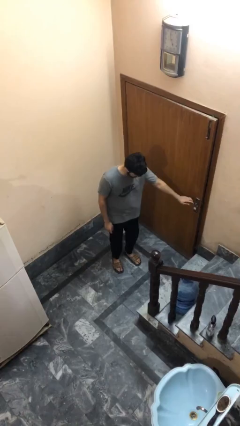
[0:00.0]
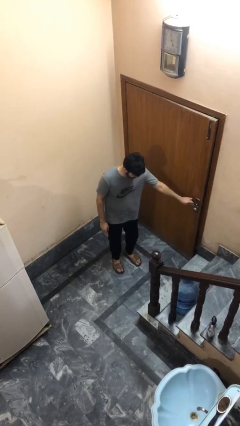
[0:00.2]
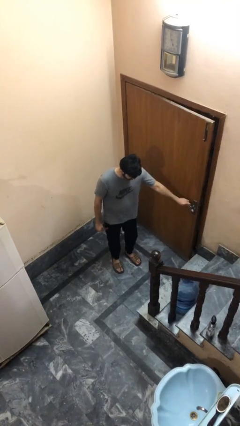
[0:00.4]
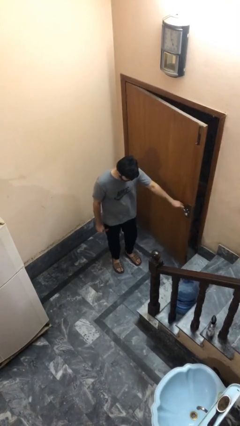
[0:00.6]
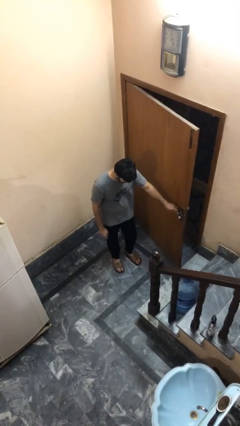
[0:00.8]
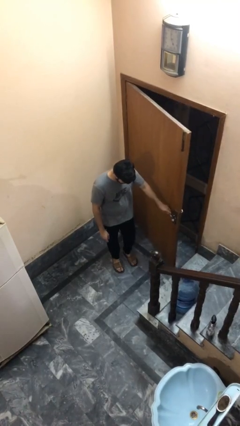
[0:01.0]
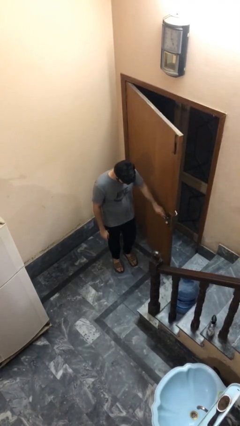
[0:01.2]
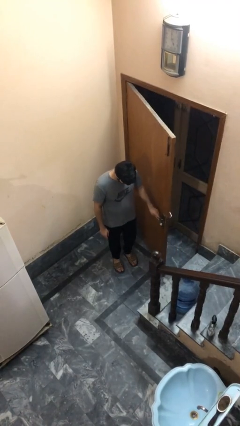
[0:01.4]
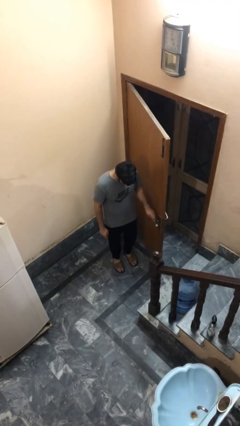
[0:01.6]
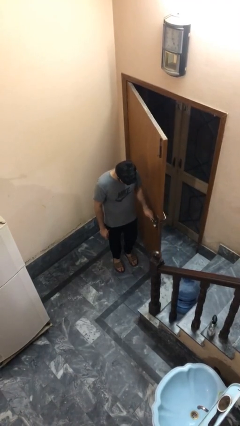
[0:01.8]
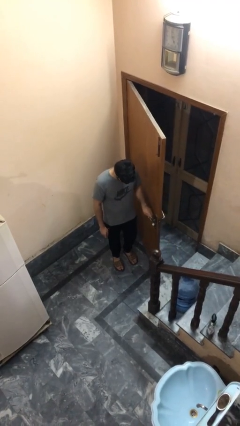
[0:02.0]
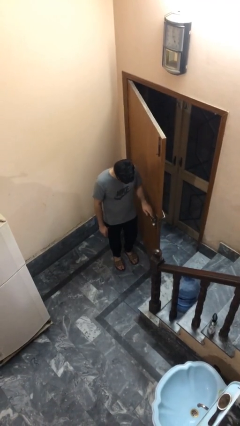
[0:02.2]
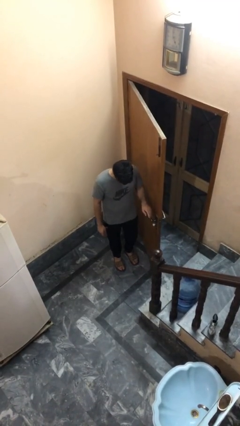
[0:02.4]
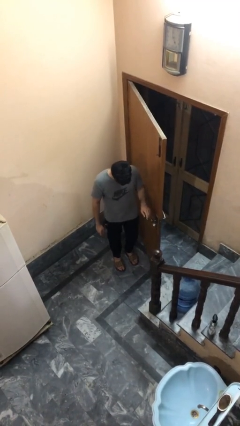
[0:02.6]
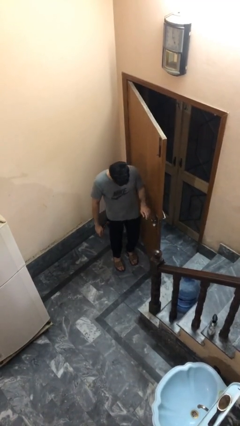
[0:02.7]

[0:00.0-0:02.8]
person opens facility door

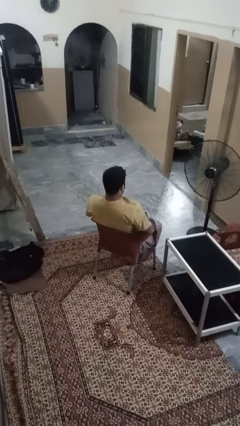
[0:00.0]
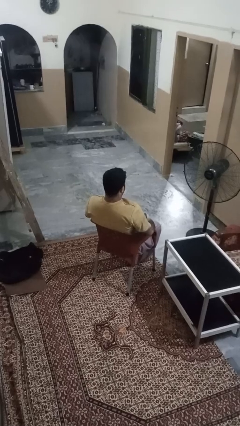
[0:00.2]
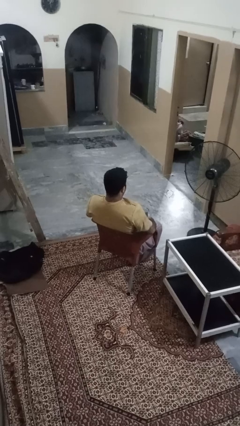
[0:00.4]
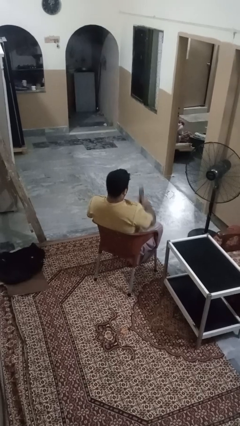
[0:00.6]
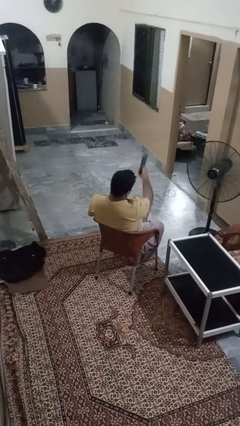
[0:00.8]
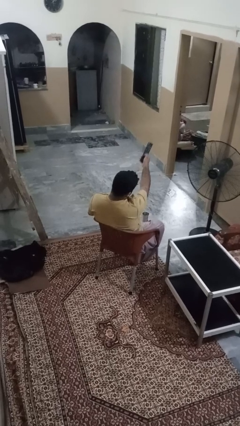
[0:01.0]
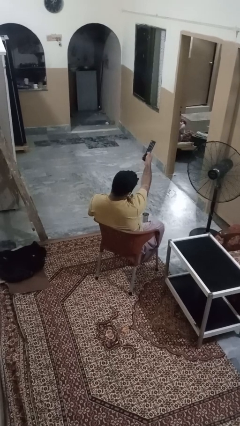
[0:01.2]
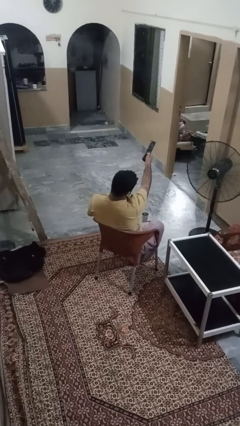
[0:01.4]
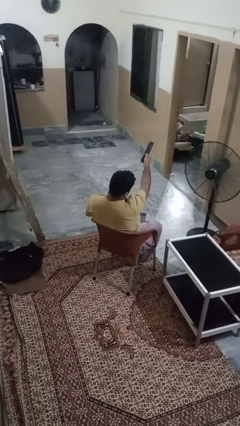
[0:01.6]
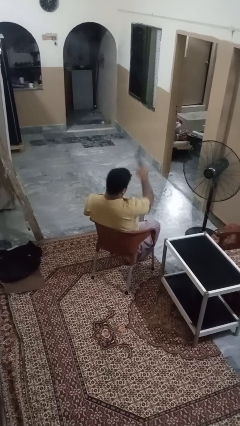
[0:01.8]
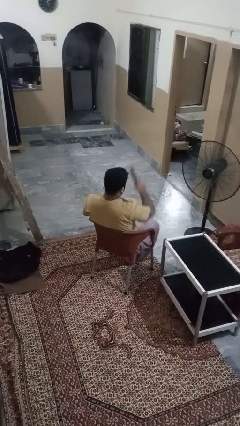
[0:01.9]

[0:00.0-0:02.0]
person uses television remote

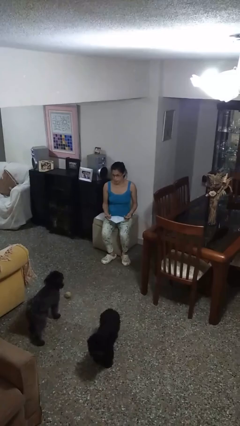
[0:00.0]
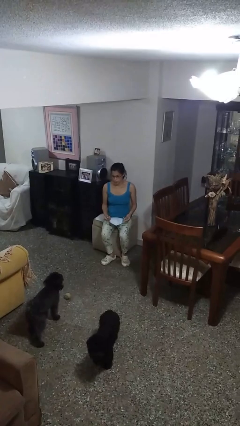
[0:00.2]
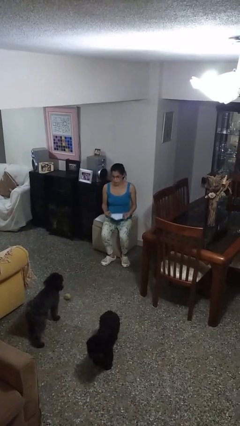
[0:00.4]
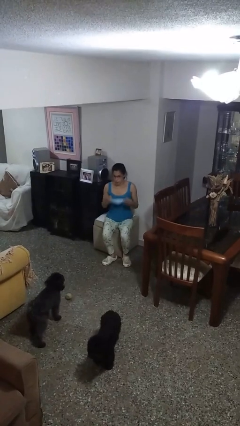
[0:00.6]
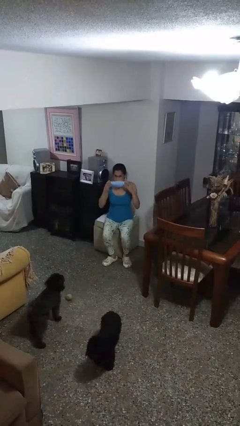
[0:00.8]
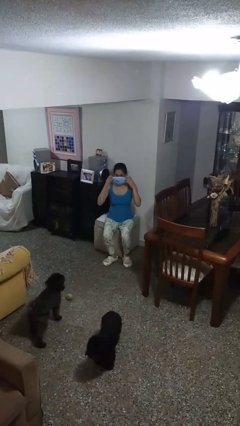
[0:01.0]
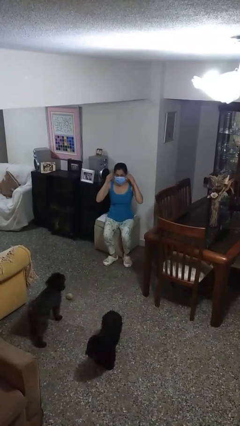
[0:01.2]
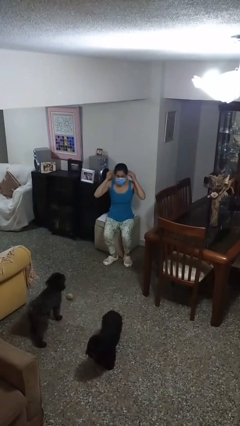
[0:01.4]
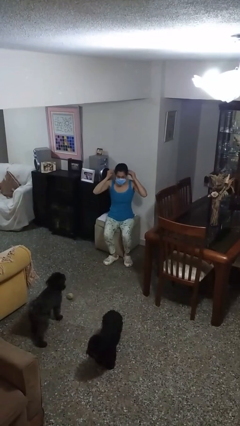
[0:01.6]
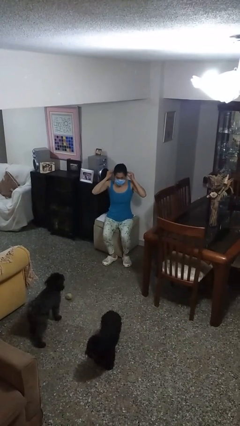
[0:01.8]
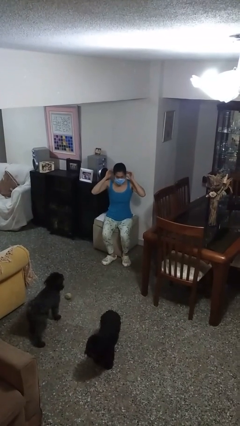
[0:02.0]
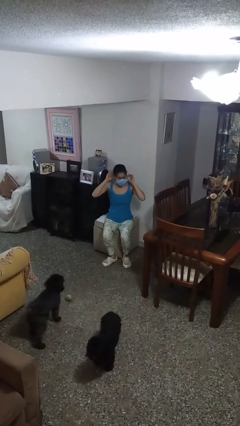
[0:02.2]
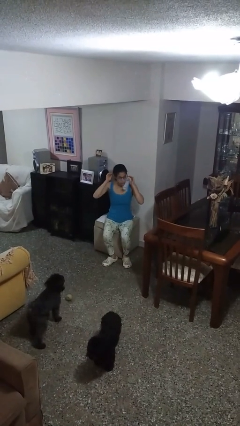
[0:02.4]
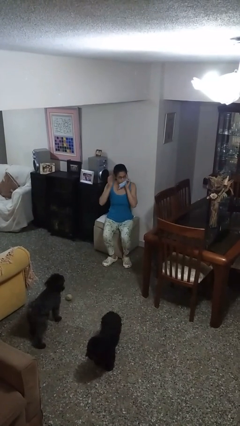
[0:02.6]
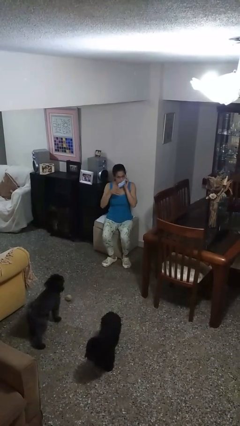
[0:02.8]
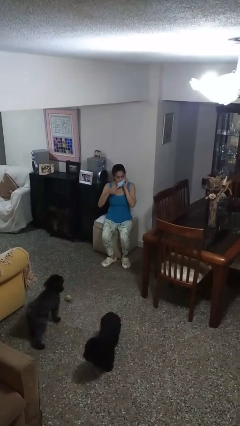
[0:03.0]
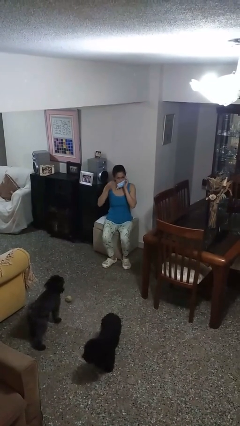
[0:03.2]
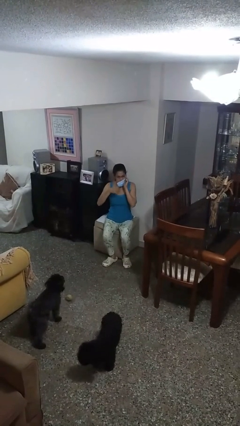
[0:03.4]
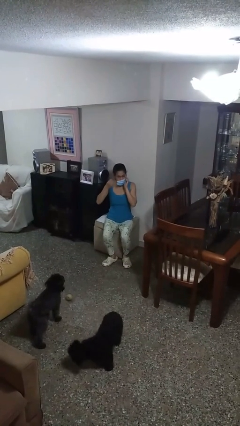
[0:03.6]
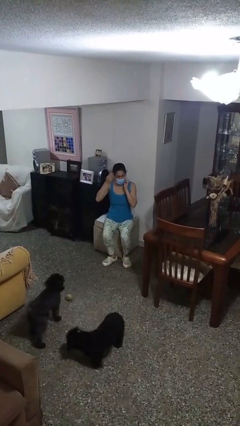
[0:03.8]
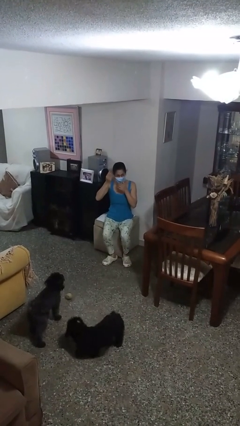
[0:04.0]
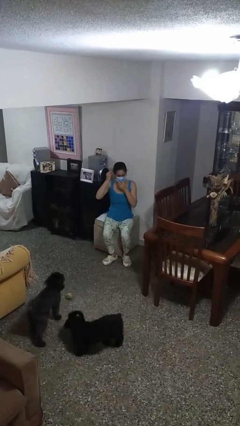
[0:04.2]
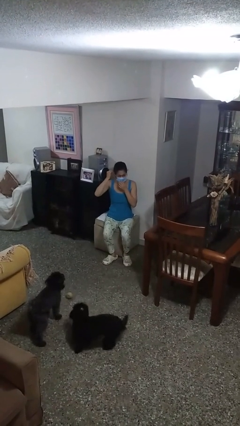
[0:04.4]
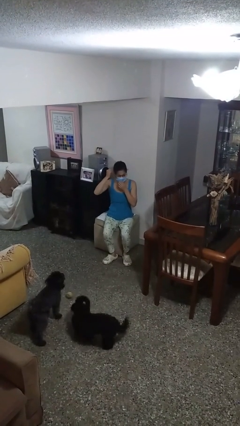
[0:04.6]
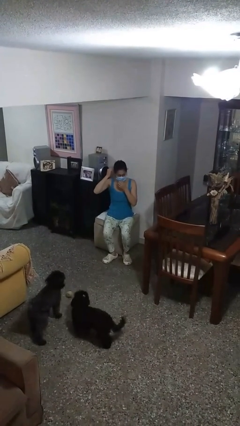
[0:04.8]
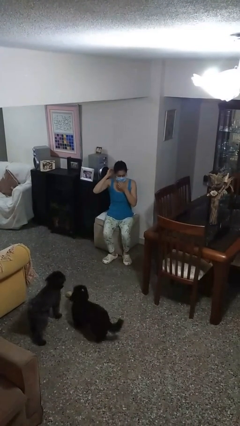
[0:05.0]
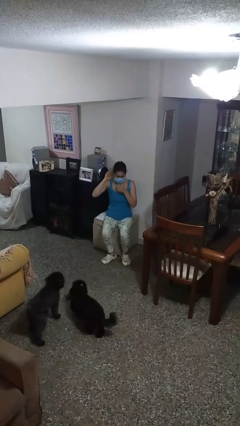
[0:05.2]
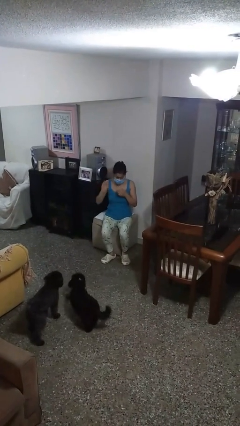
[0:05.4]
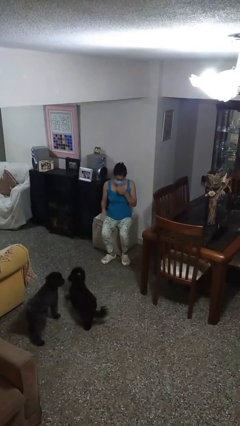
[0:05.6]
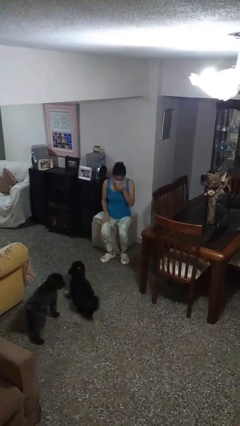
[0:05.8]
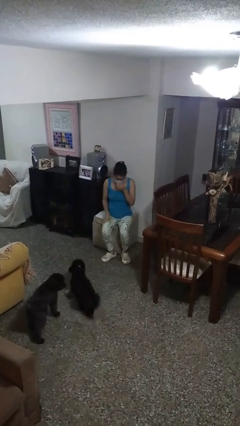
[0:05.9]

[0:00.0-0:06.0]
person puts on facemask

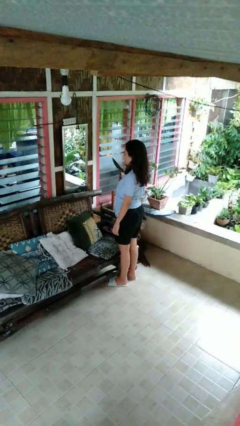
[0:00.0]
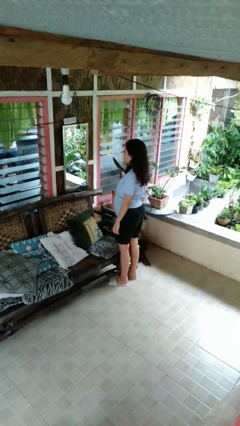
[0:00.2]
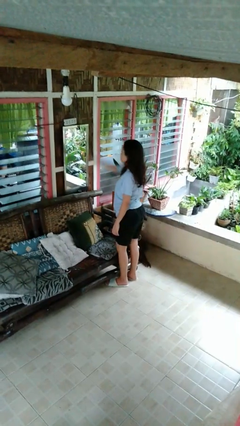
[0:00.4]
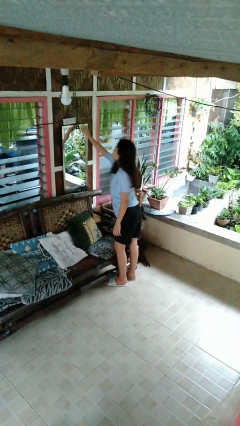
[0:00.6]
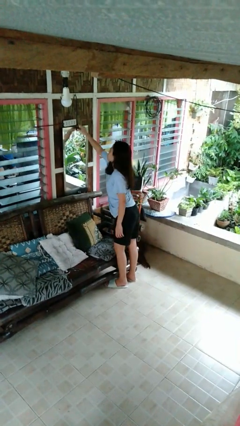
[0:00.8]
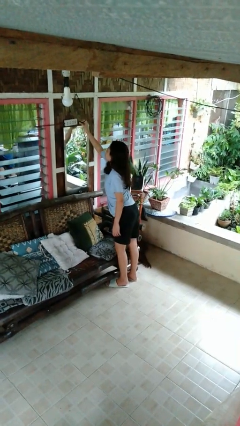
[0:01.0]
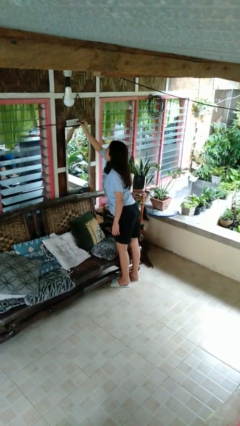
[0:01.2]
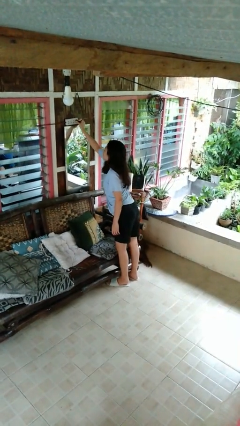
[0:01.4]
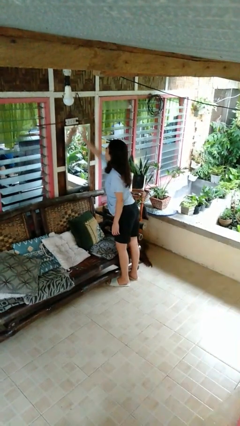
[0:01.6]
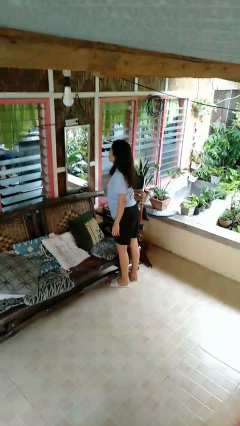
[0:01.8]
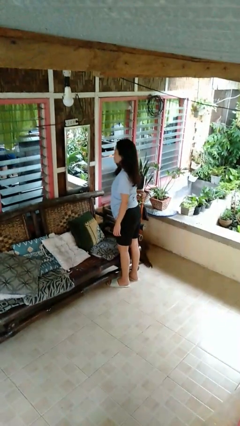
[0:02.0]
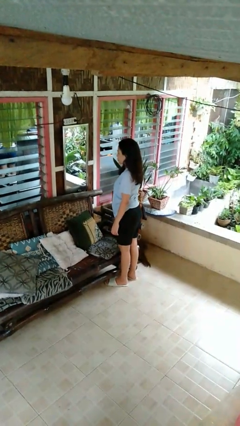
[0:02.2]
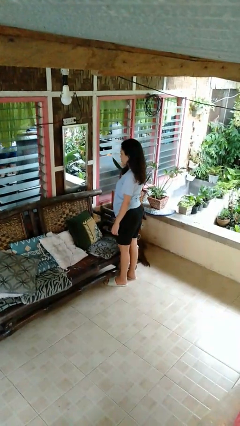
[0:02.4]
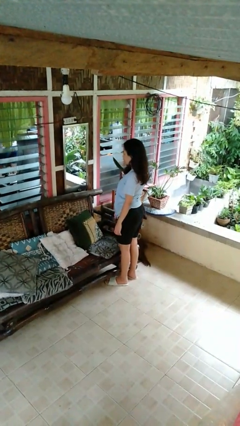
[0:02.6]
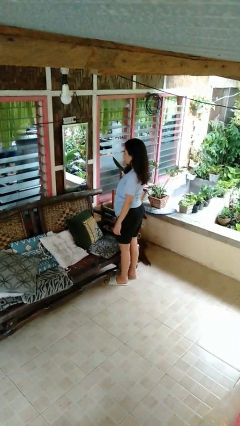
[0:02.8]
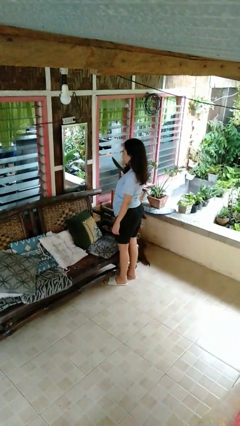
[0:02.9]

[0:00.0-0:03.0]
person plugs into electrical socket

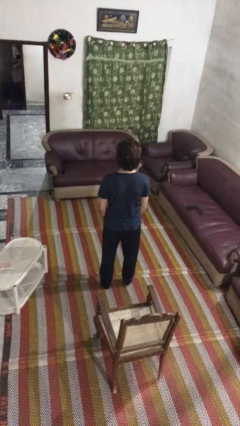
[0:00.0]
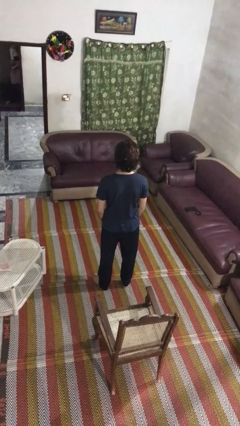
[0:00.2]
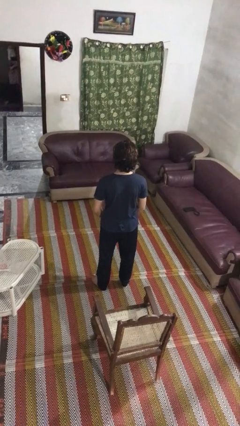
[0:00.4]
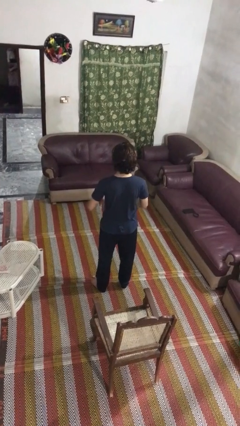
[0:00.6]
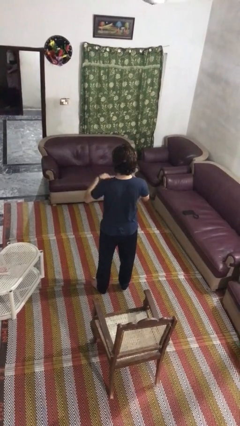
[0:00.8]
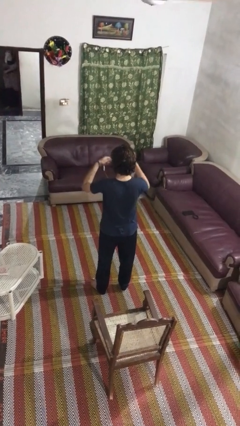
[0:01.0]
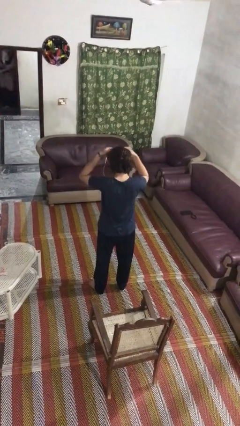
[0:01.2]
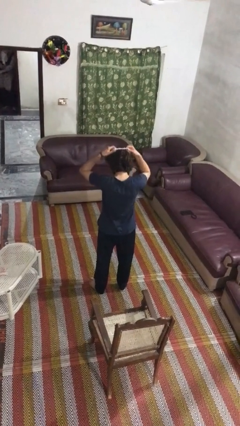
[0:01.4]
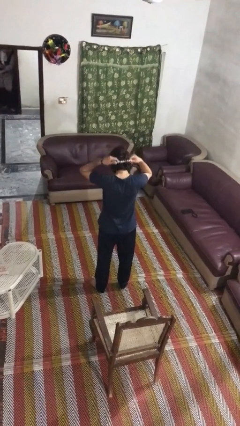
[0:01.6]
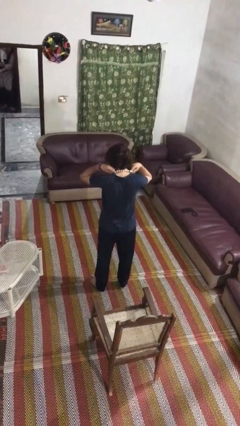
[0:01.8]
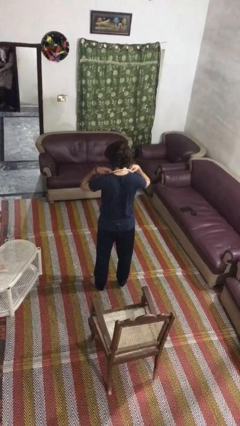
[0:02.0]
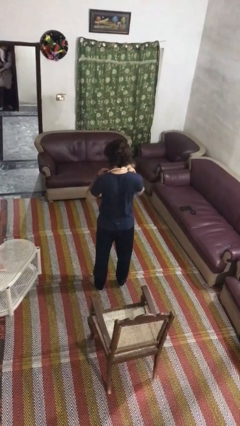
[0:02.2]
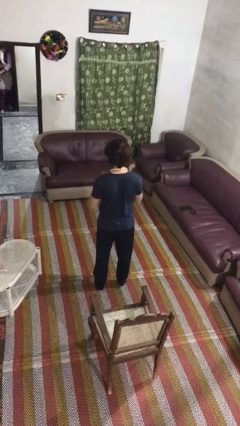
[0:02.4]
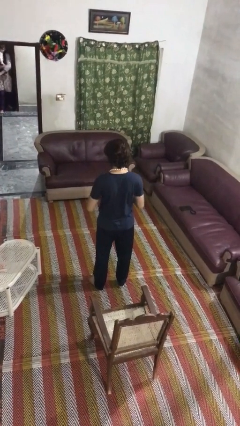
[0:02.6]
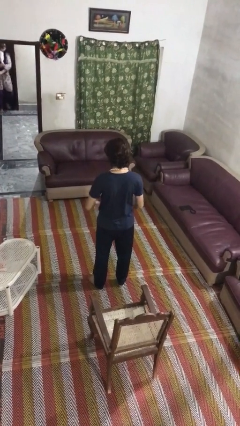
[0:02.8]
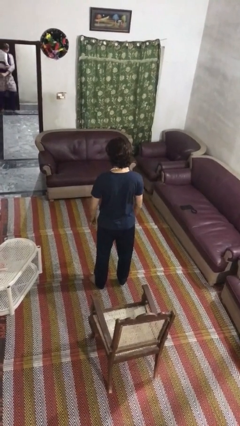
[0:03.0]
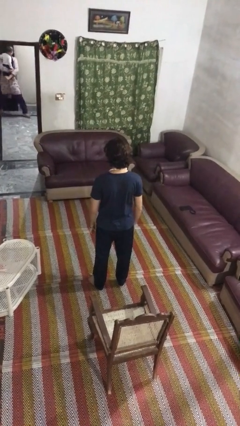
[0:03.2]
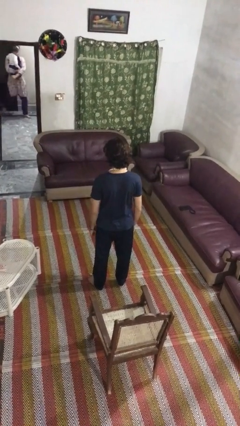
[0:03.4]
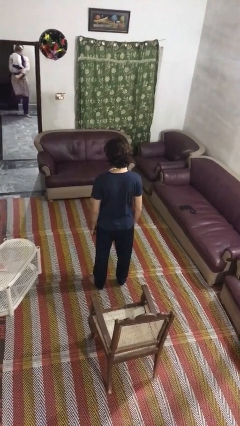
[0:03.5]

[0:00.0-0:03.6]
person puts on necklace

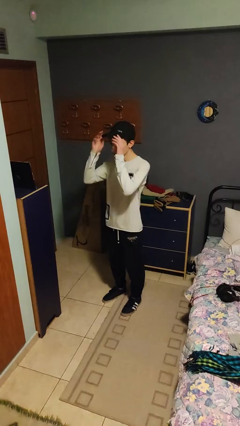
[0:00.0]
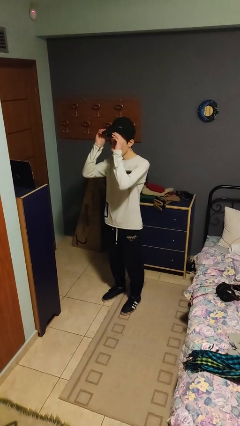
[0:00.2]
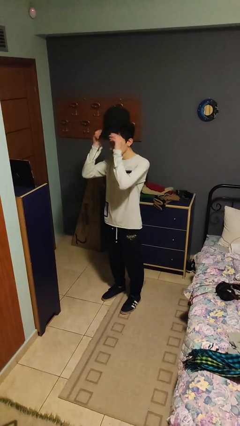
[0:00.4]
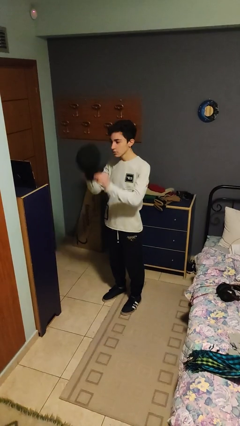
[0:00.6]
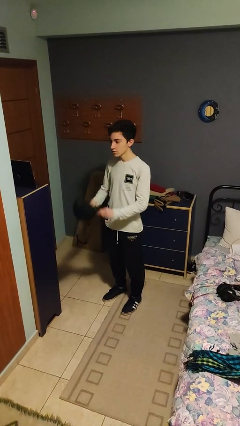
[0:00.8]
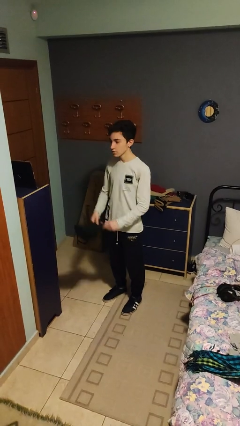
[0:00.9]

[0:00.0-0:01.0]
person takes off hat
